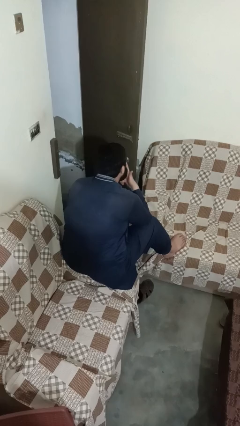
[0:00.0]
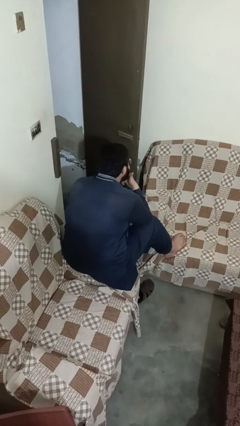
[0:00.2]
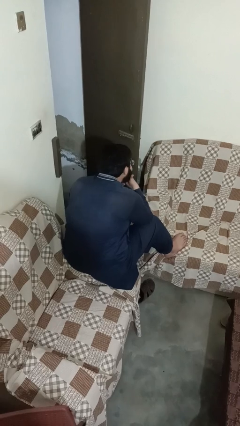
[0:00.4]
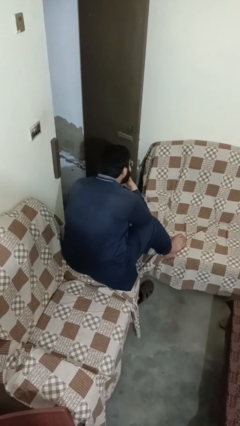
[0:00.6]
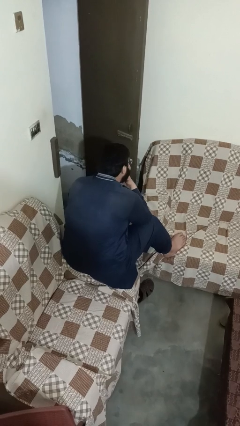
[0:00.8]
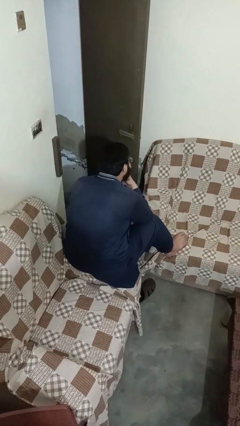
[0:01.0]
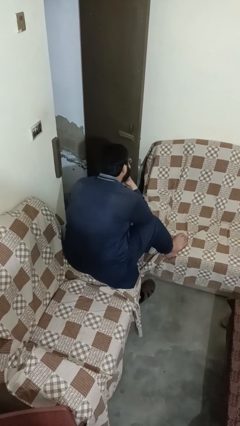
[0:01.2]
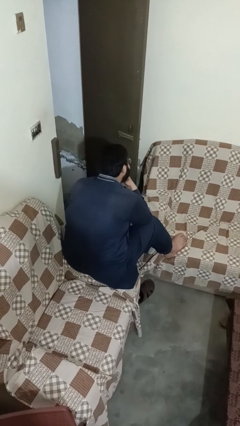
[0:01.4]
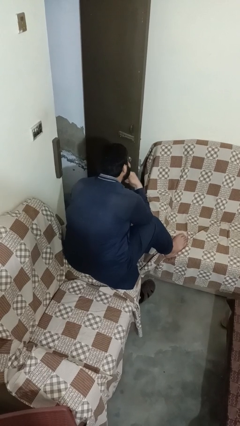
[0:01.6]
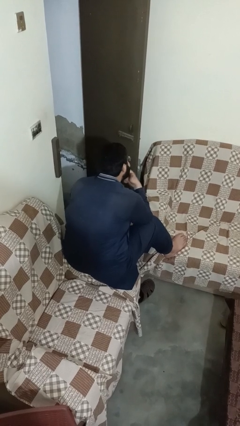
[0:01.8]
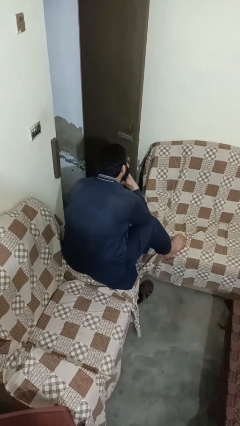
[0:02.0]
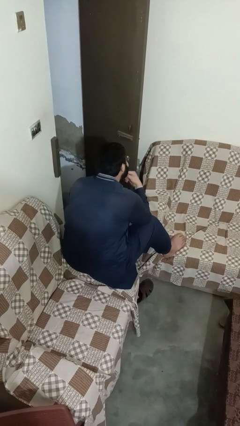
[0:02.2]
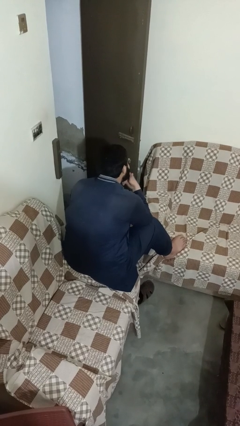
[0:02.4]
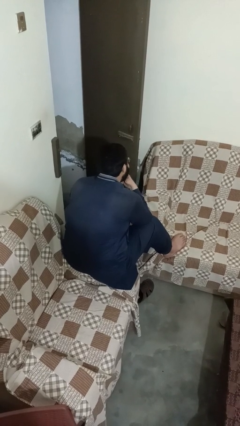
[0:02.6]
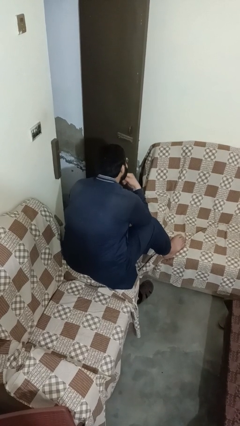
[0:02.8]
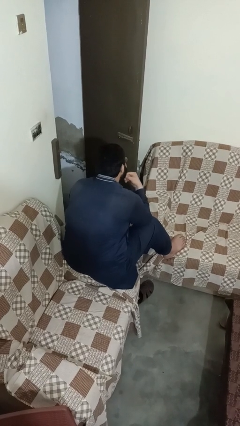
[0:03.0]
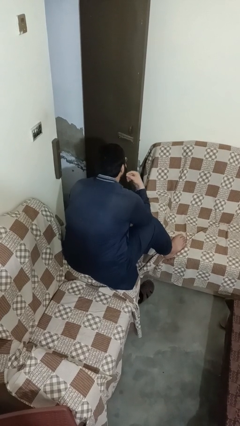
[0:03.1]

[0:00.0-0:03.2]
person strokes chin

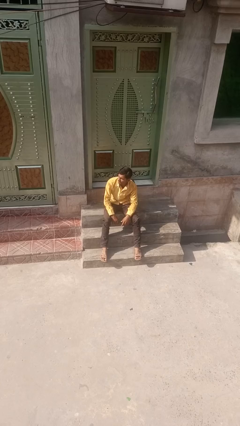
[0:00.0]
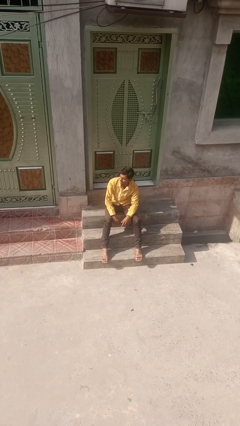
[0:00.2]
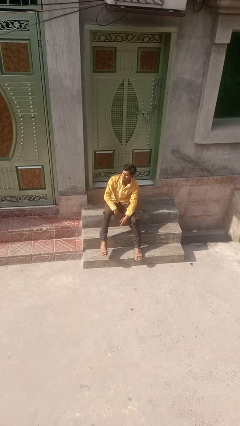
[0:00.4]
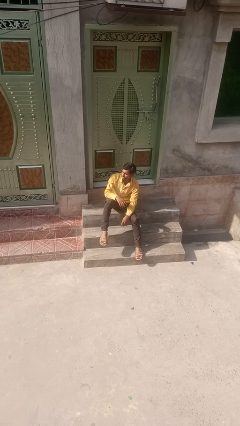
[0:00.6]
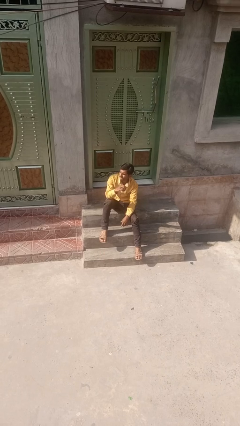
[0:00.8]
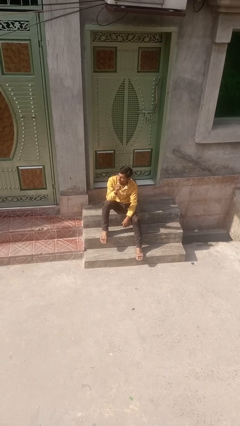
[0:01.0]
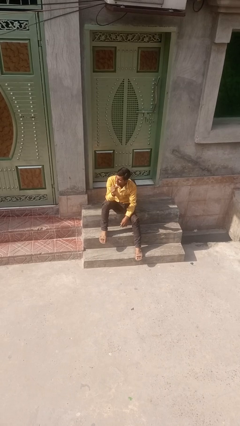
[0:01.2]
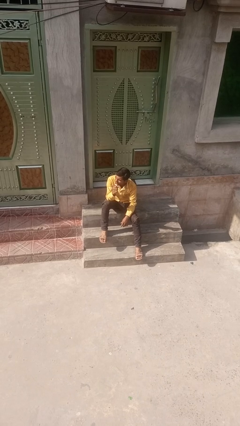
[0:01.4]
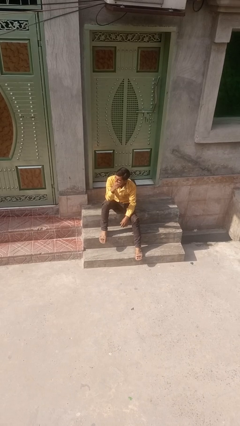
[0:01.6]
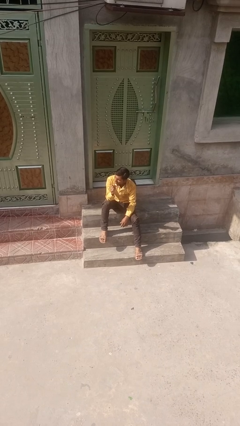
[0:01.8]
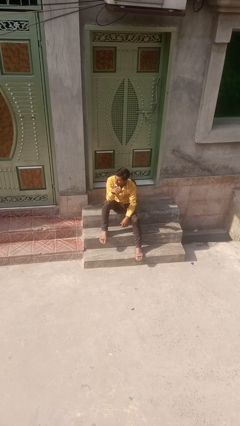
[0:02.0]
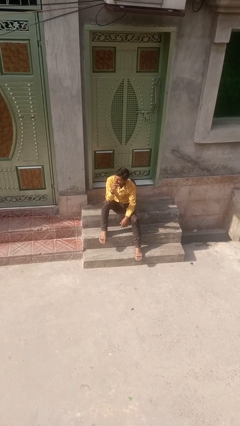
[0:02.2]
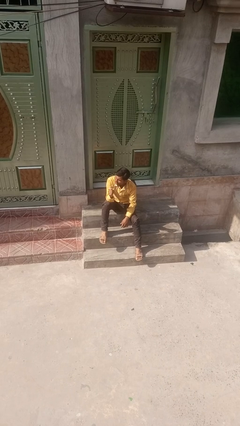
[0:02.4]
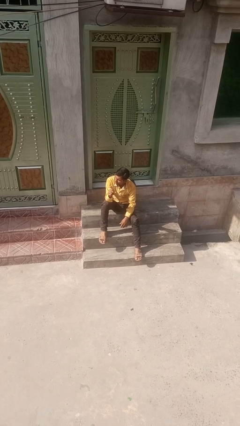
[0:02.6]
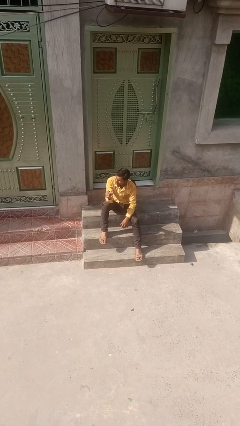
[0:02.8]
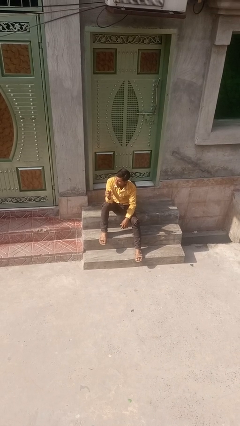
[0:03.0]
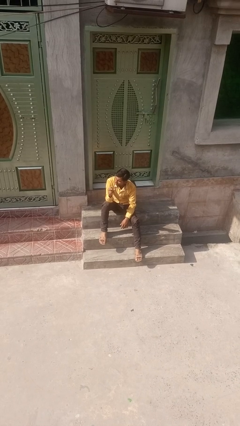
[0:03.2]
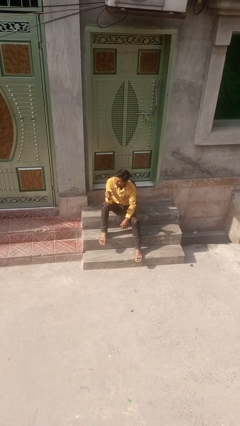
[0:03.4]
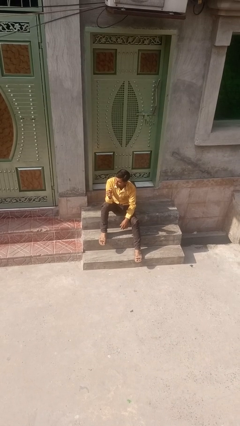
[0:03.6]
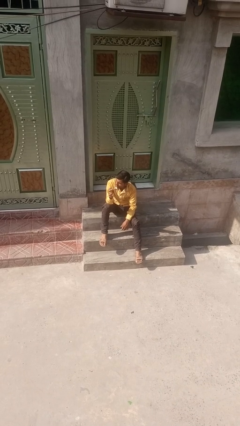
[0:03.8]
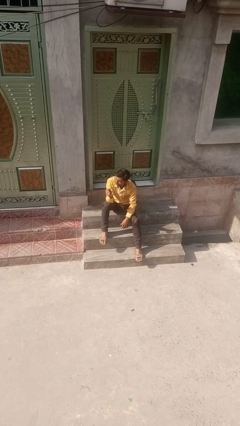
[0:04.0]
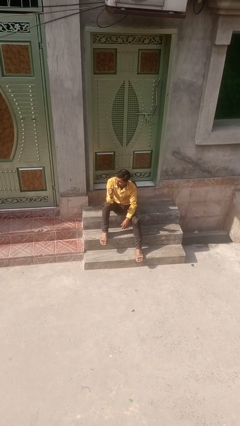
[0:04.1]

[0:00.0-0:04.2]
person snaps fingers

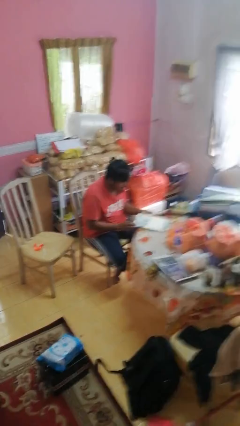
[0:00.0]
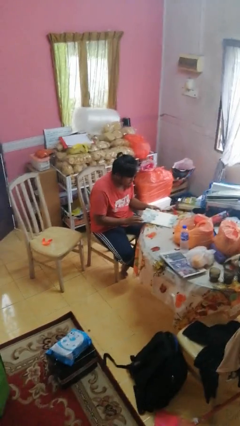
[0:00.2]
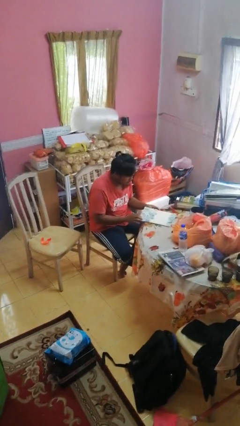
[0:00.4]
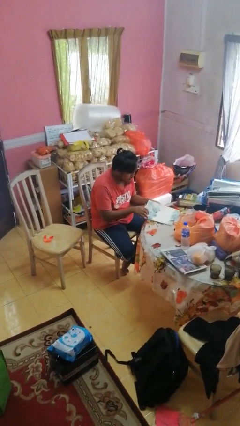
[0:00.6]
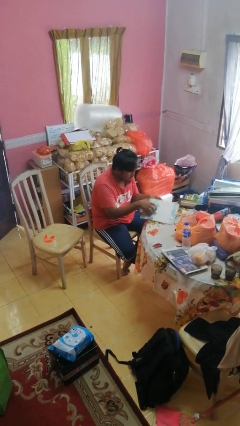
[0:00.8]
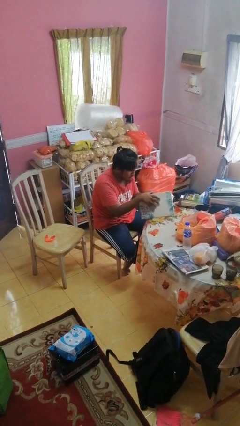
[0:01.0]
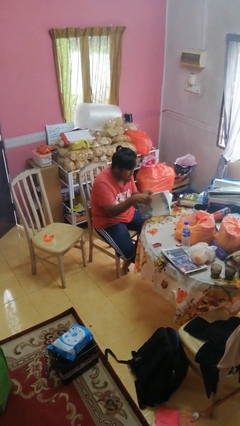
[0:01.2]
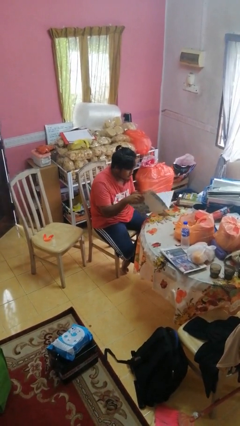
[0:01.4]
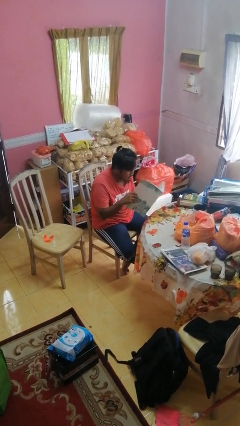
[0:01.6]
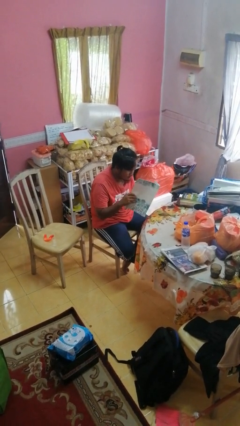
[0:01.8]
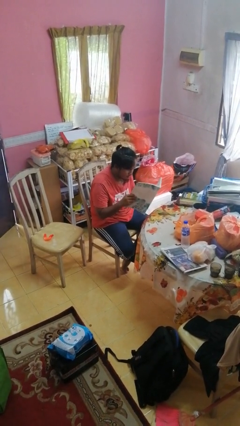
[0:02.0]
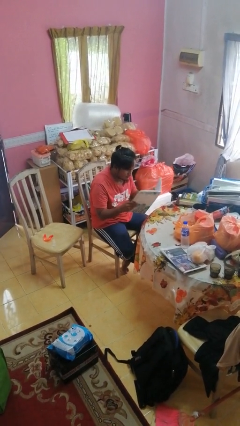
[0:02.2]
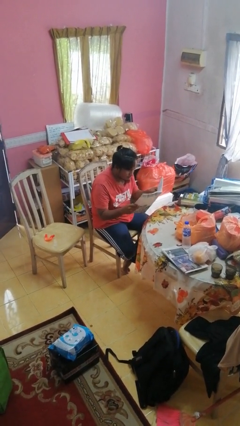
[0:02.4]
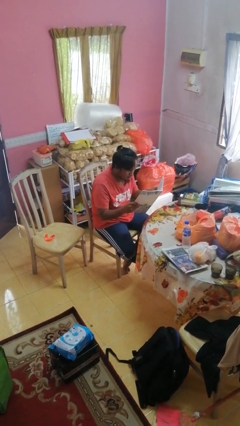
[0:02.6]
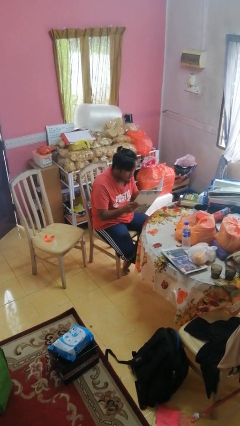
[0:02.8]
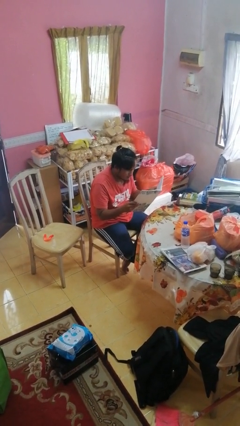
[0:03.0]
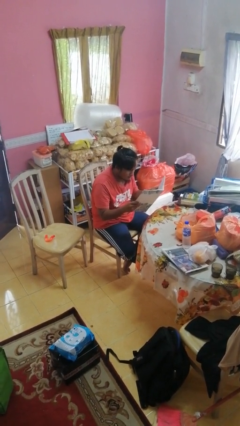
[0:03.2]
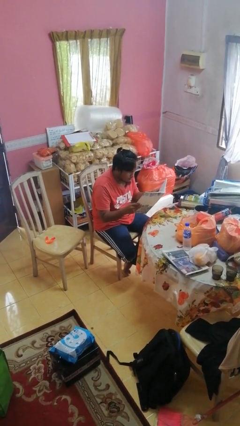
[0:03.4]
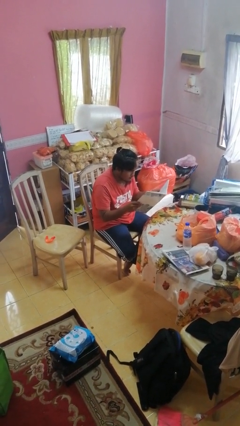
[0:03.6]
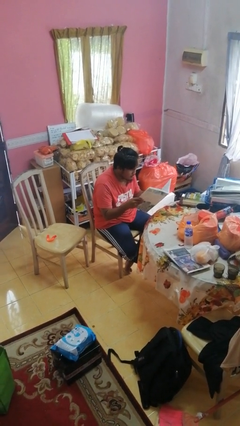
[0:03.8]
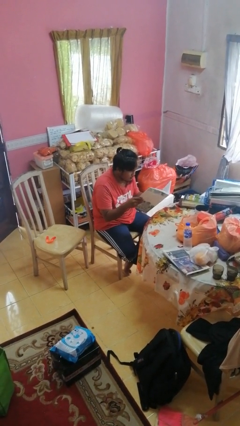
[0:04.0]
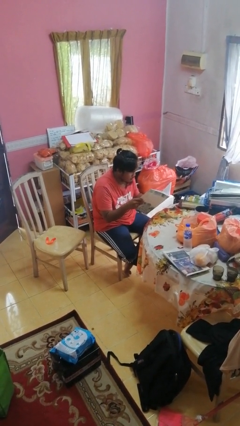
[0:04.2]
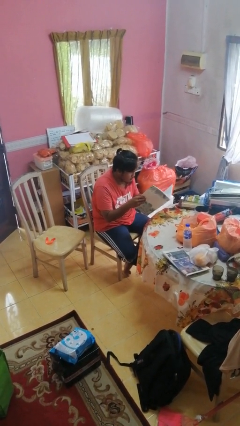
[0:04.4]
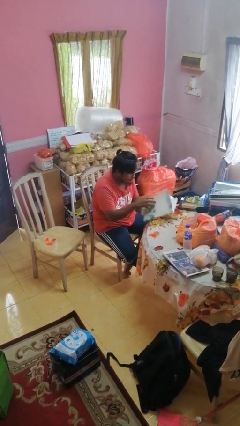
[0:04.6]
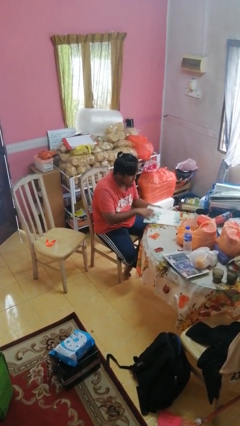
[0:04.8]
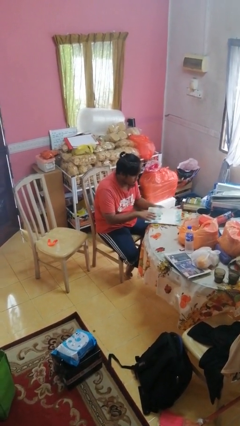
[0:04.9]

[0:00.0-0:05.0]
person reads magazine

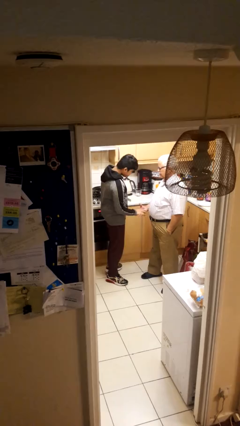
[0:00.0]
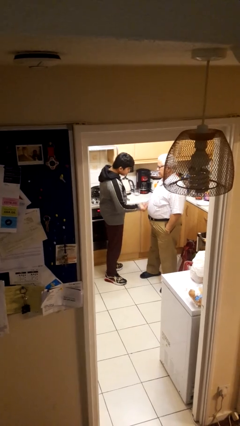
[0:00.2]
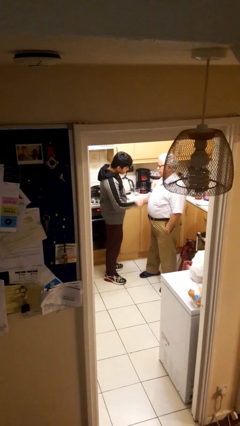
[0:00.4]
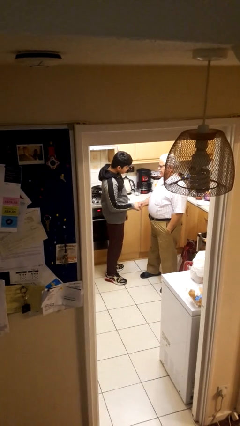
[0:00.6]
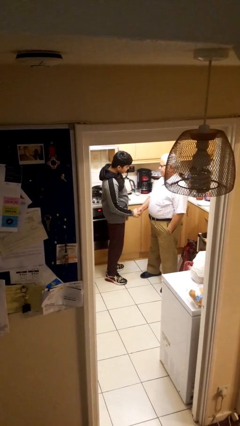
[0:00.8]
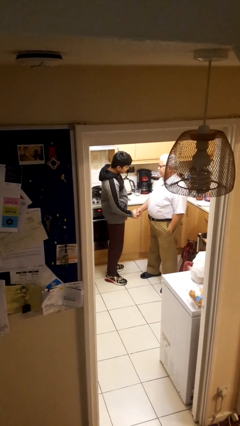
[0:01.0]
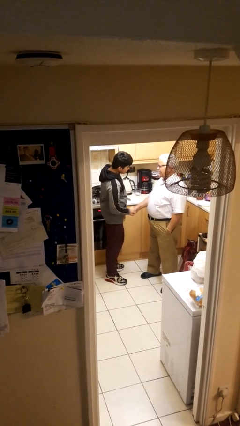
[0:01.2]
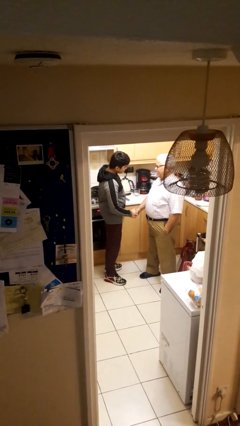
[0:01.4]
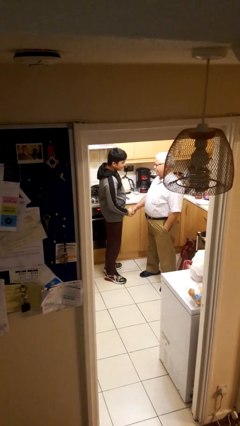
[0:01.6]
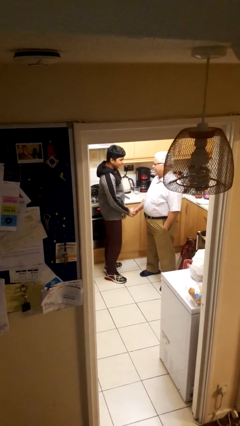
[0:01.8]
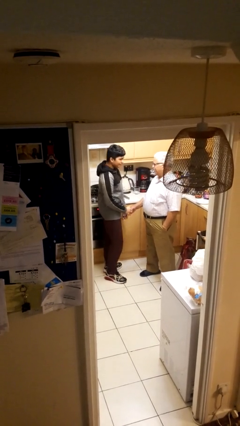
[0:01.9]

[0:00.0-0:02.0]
person highfives hand

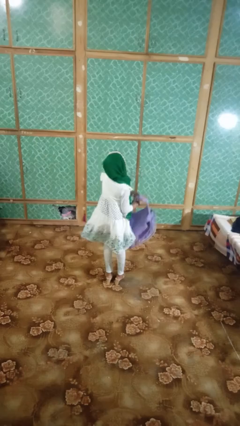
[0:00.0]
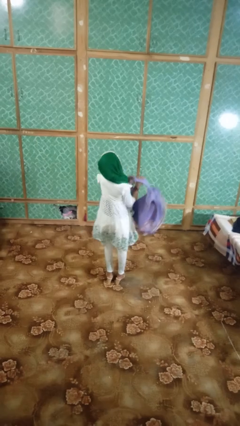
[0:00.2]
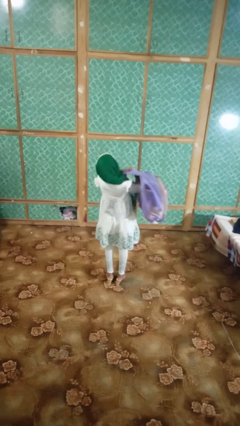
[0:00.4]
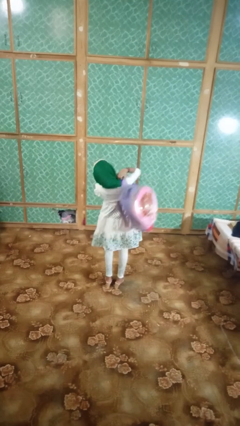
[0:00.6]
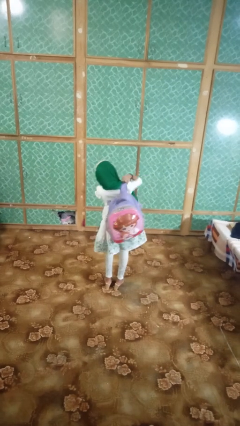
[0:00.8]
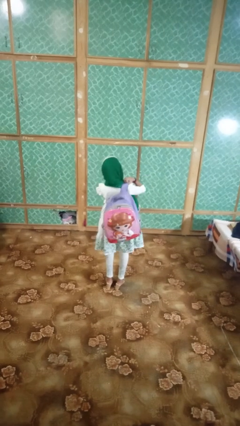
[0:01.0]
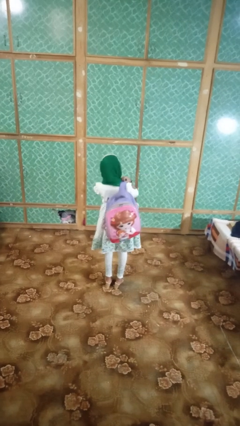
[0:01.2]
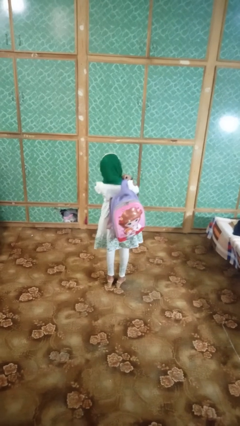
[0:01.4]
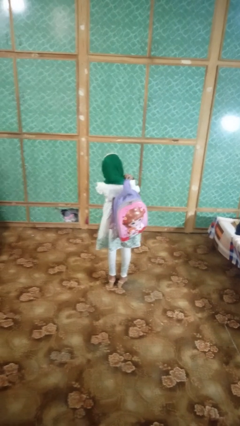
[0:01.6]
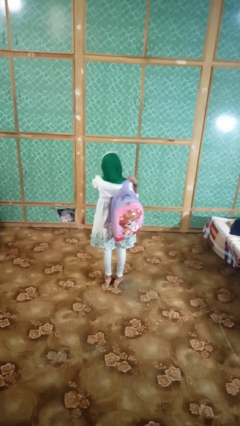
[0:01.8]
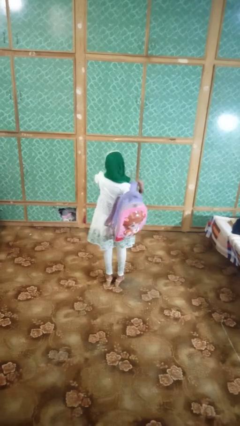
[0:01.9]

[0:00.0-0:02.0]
person takes off backpack

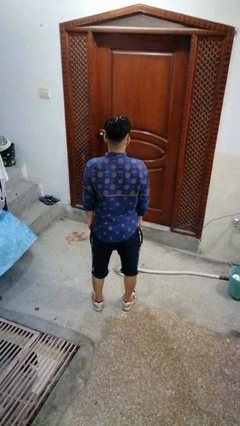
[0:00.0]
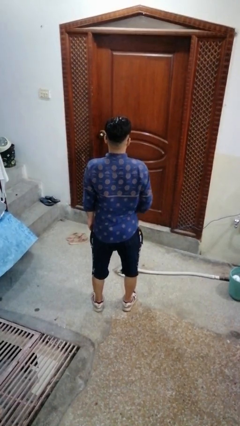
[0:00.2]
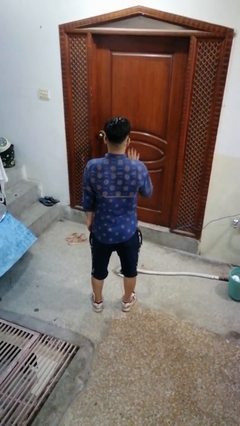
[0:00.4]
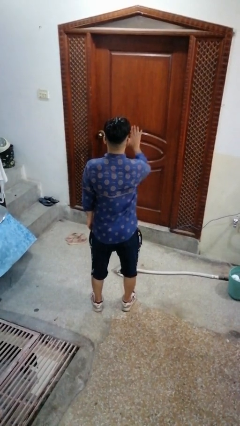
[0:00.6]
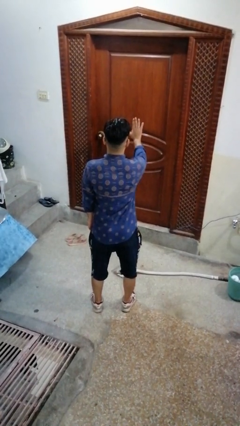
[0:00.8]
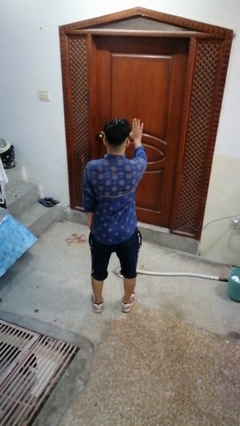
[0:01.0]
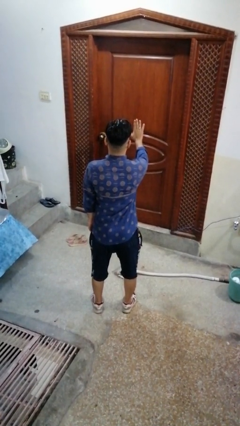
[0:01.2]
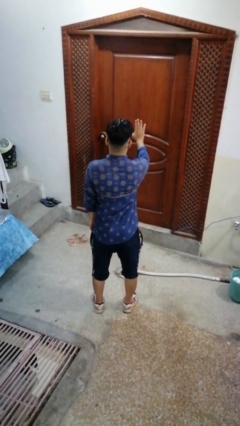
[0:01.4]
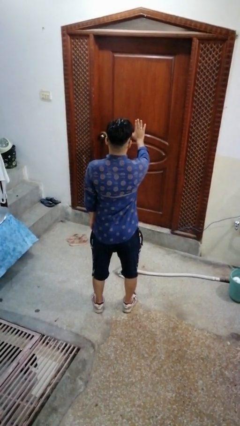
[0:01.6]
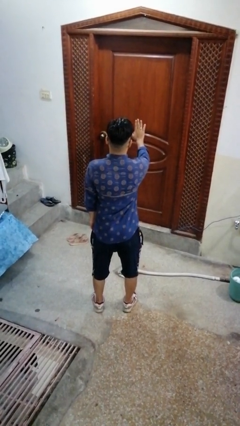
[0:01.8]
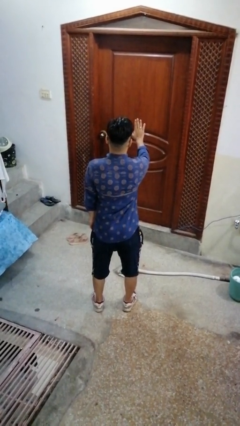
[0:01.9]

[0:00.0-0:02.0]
person gestures stop
